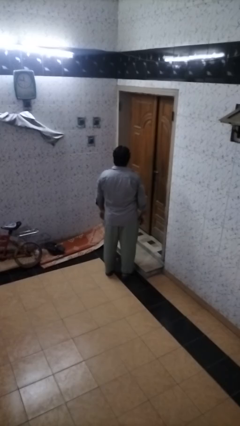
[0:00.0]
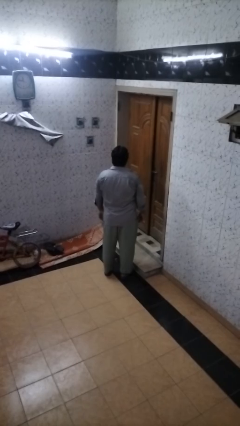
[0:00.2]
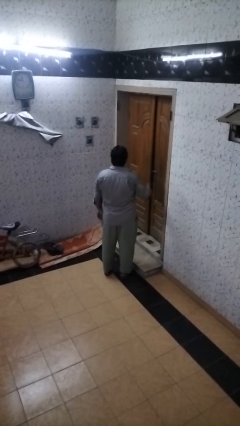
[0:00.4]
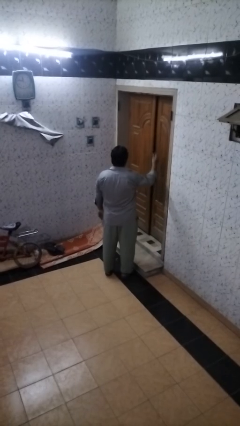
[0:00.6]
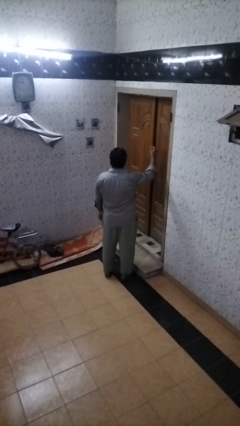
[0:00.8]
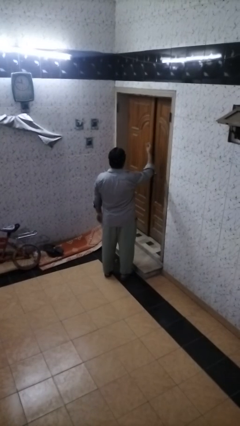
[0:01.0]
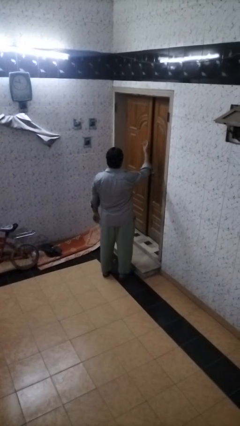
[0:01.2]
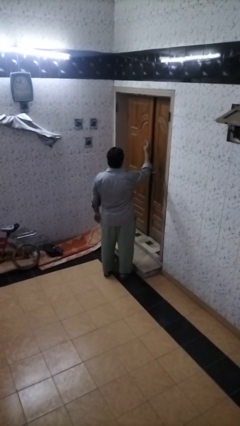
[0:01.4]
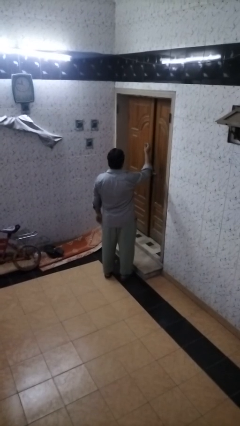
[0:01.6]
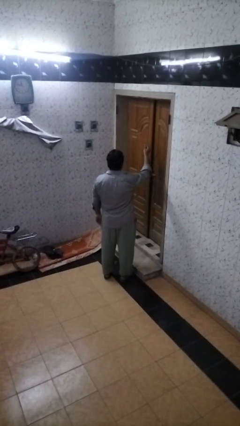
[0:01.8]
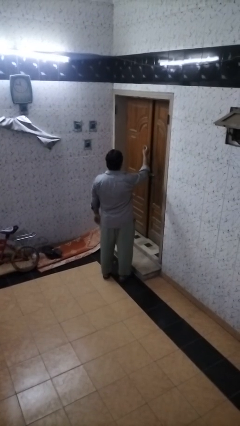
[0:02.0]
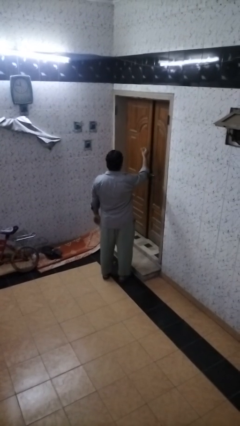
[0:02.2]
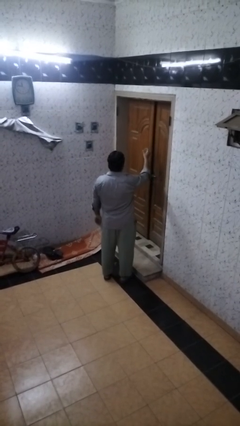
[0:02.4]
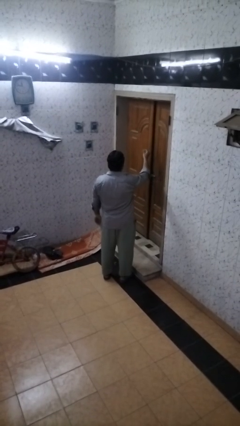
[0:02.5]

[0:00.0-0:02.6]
person snaps fingers

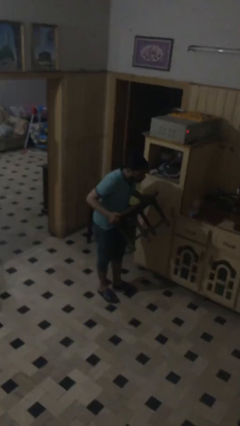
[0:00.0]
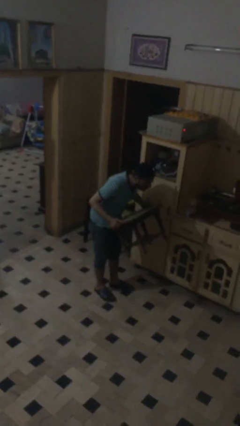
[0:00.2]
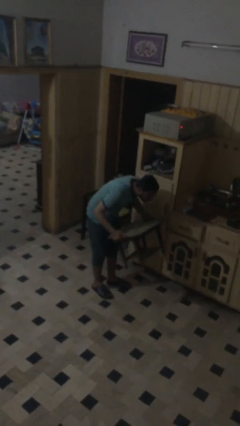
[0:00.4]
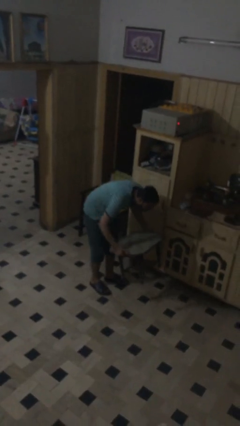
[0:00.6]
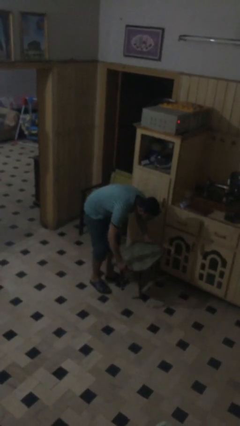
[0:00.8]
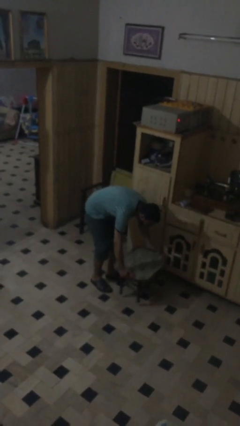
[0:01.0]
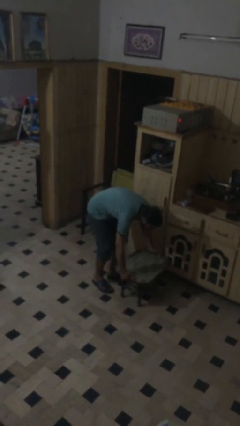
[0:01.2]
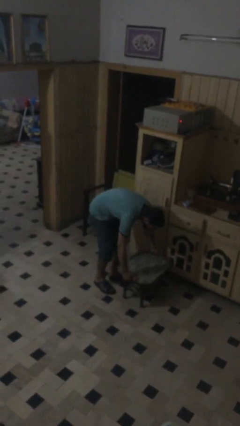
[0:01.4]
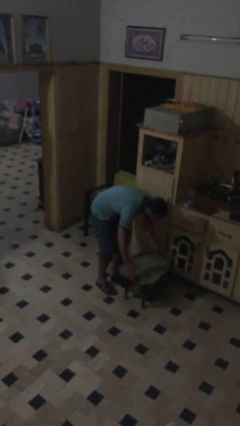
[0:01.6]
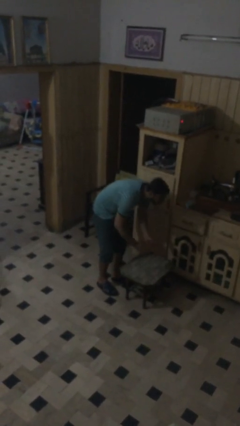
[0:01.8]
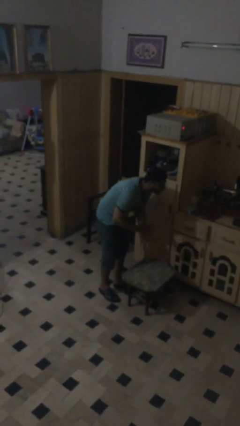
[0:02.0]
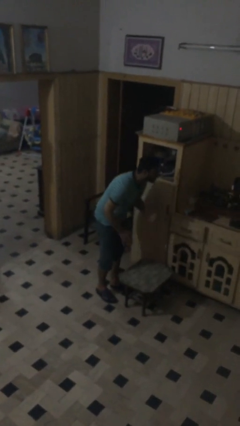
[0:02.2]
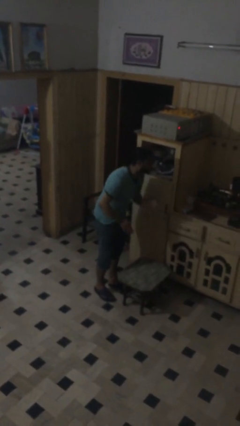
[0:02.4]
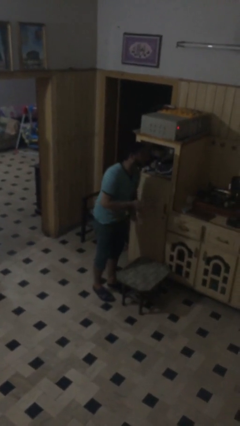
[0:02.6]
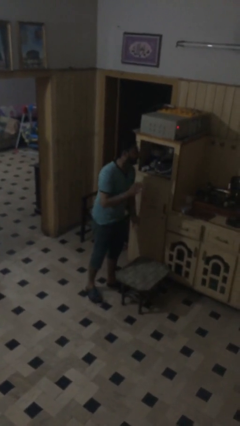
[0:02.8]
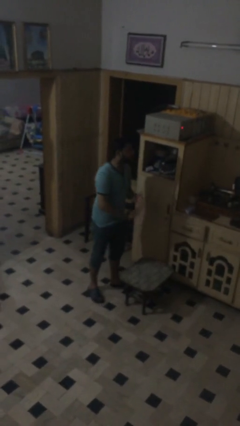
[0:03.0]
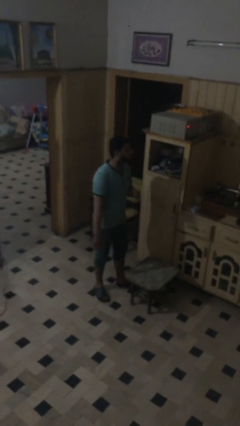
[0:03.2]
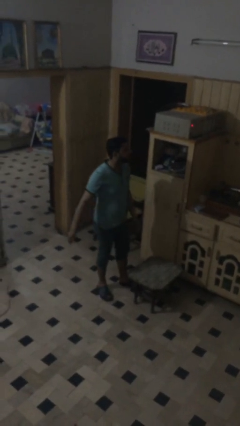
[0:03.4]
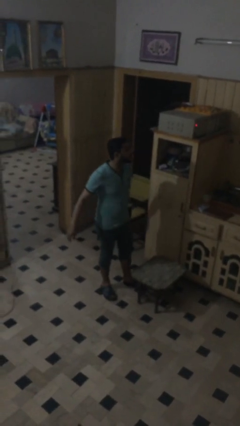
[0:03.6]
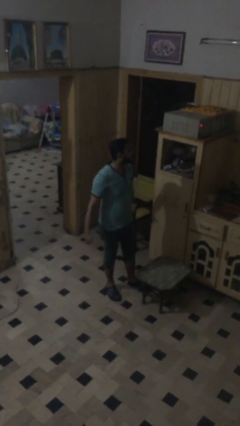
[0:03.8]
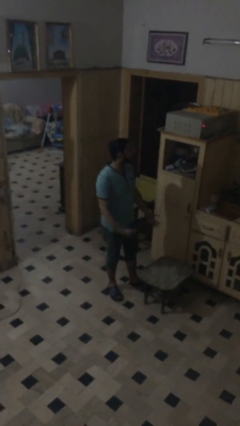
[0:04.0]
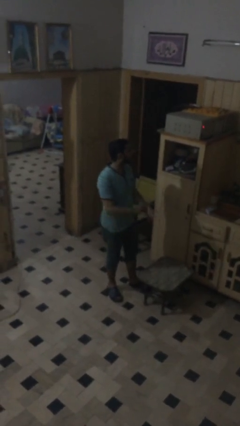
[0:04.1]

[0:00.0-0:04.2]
person puts down object on floor

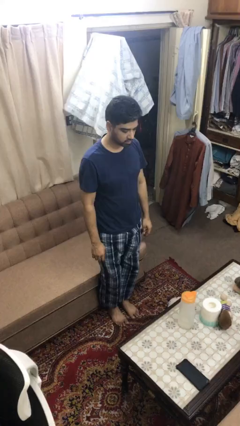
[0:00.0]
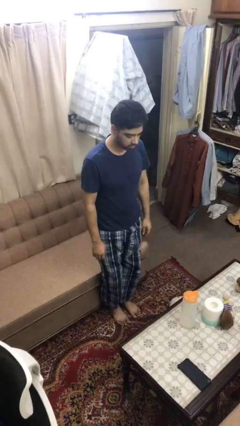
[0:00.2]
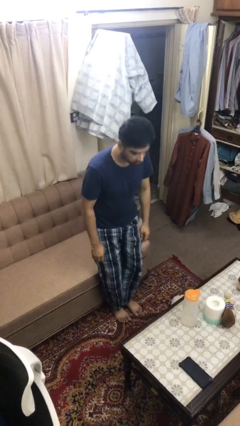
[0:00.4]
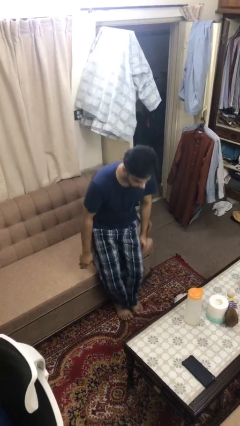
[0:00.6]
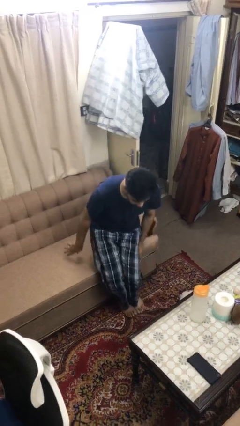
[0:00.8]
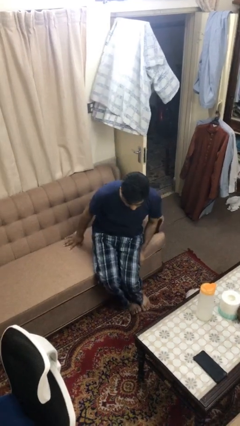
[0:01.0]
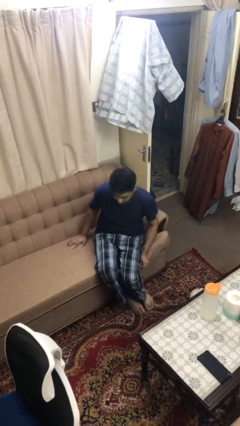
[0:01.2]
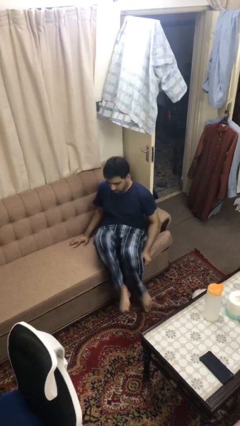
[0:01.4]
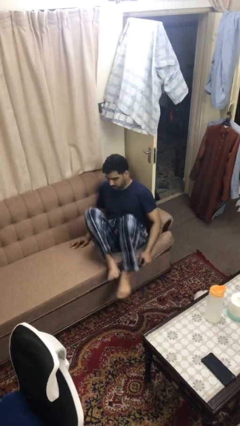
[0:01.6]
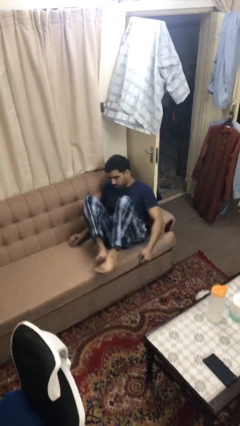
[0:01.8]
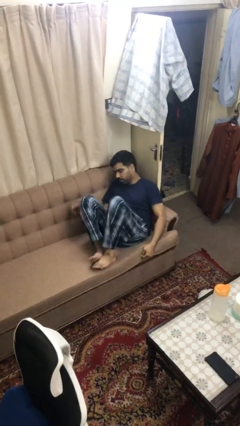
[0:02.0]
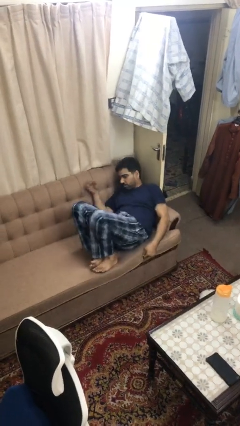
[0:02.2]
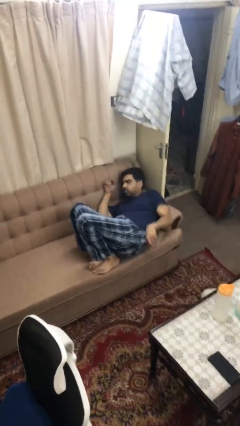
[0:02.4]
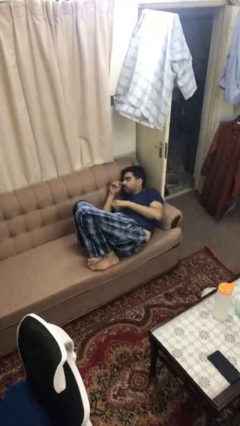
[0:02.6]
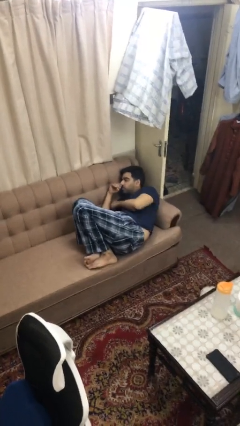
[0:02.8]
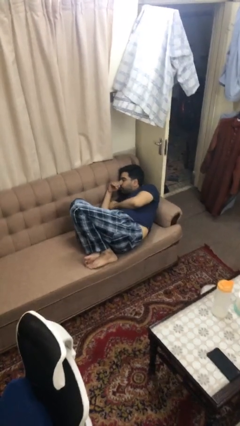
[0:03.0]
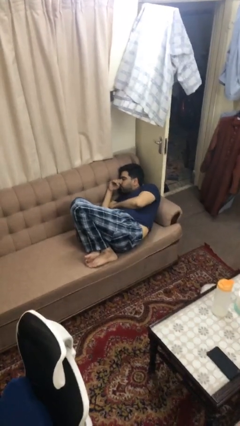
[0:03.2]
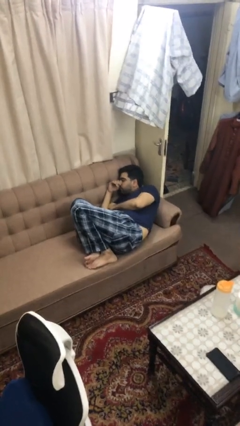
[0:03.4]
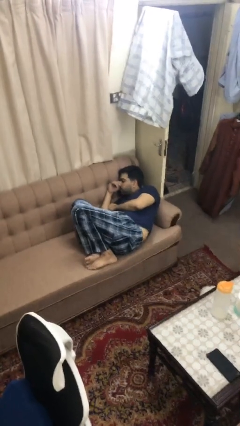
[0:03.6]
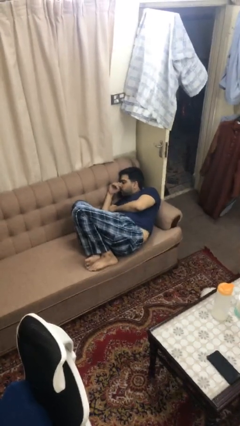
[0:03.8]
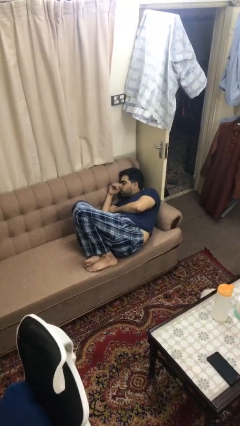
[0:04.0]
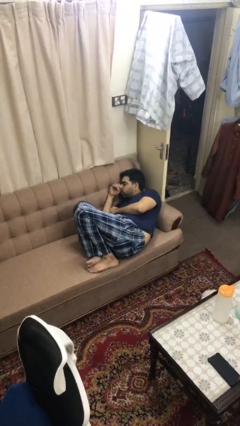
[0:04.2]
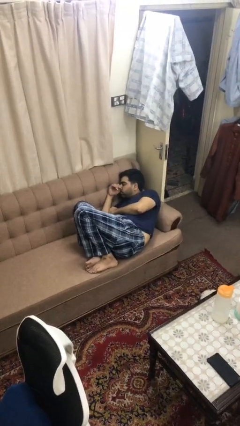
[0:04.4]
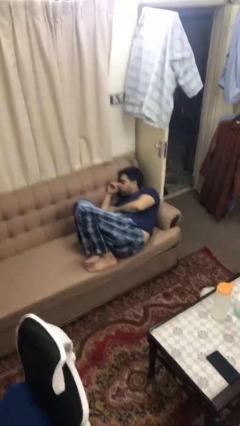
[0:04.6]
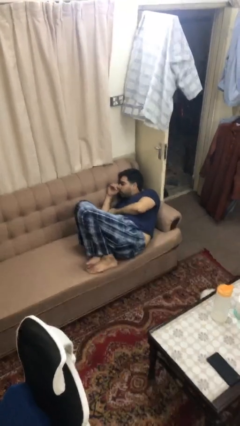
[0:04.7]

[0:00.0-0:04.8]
person lies down on couch

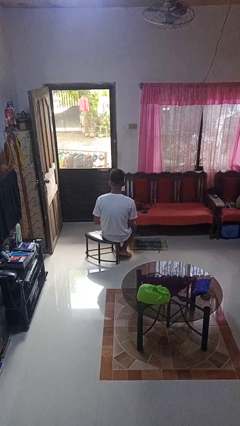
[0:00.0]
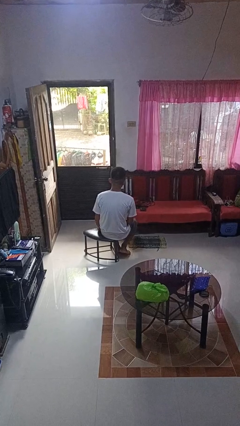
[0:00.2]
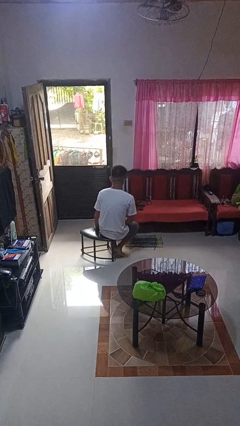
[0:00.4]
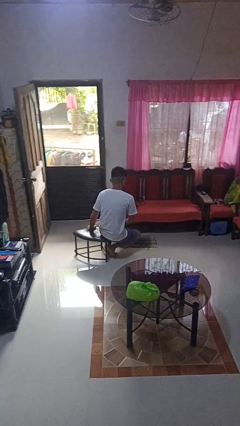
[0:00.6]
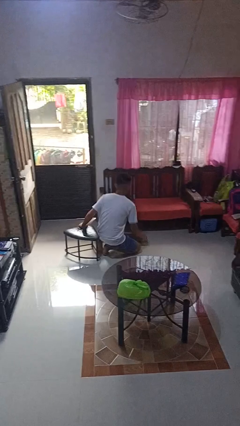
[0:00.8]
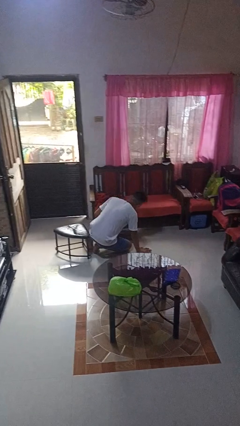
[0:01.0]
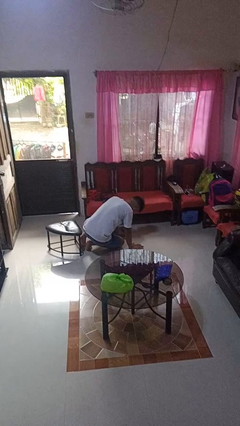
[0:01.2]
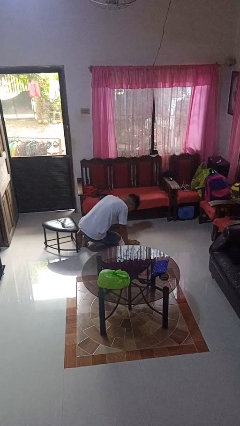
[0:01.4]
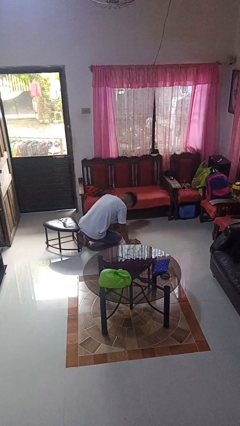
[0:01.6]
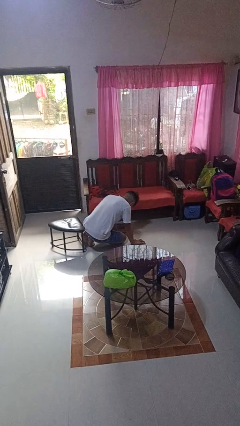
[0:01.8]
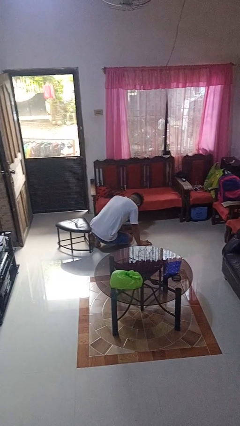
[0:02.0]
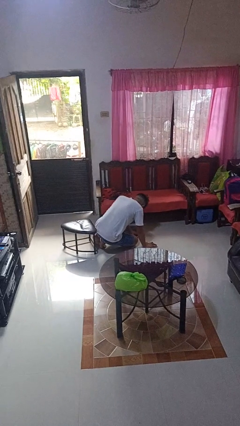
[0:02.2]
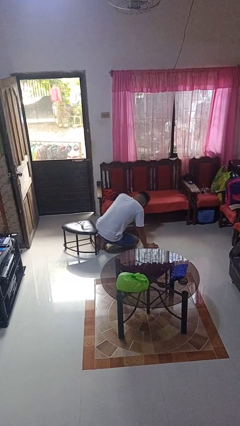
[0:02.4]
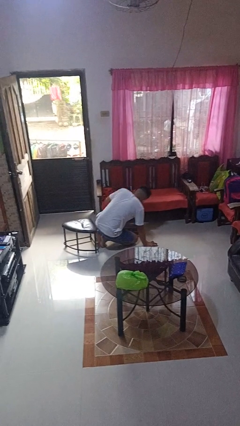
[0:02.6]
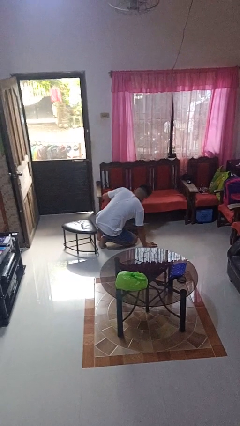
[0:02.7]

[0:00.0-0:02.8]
person falls from chair

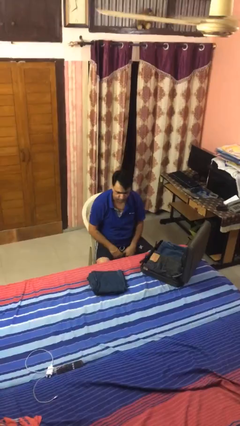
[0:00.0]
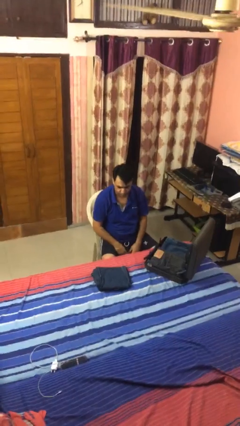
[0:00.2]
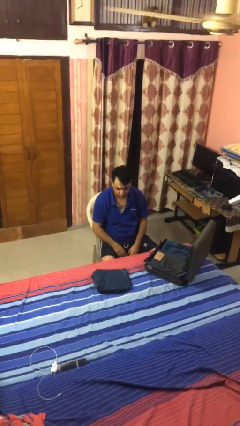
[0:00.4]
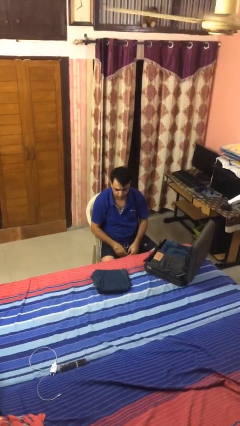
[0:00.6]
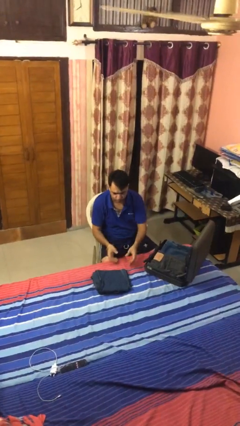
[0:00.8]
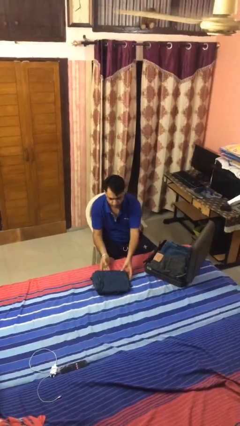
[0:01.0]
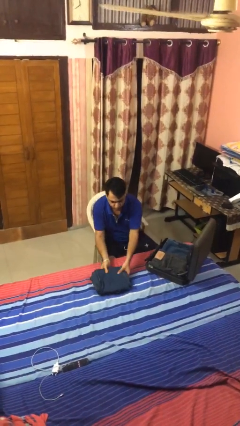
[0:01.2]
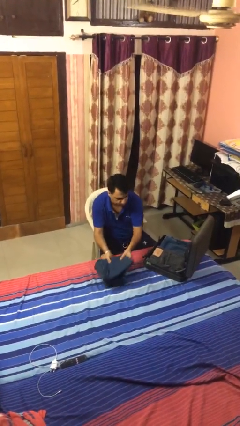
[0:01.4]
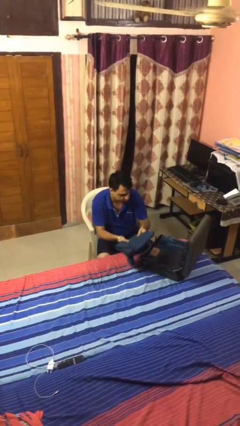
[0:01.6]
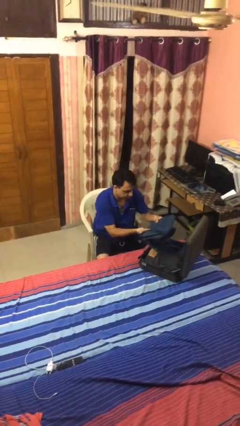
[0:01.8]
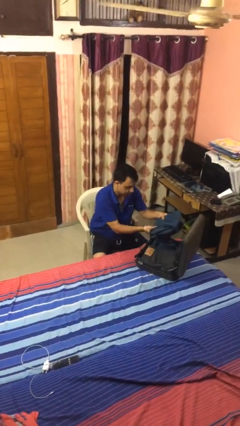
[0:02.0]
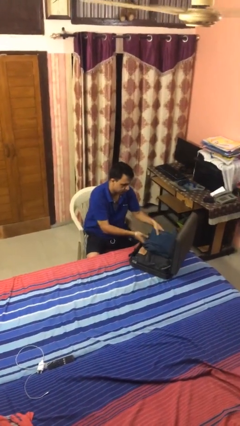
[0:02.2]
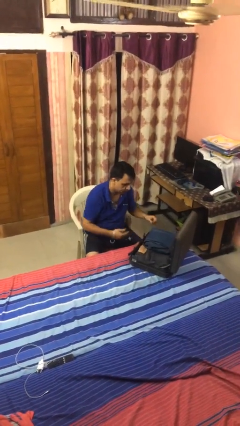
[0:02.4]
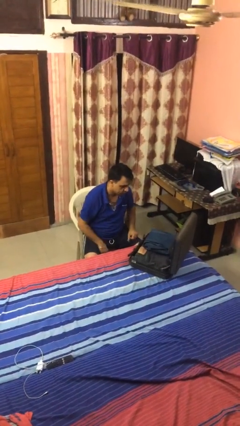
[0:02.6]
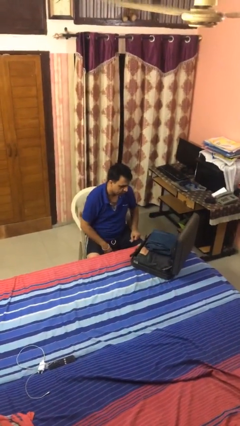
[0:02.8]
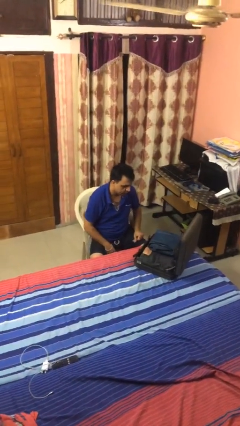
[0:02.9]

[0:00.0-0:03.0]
person loads clothes into suitcase

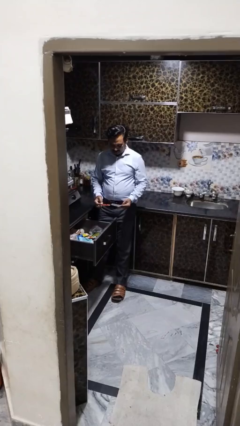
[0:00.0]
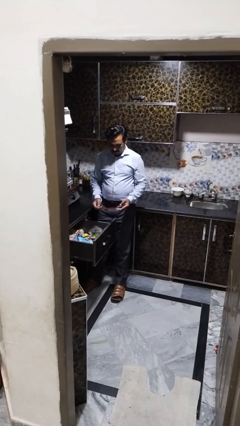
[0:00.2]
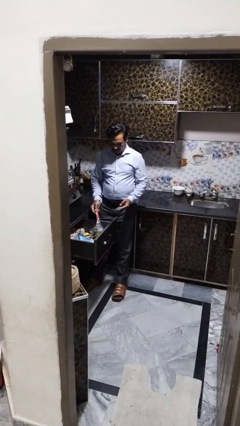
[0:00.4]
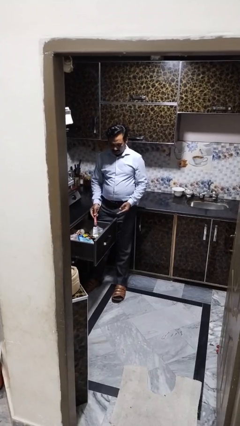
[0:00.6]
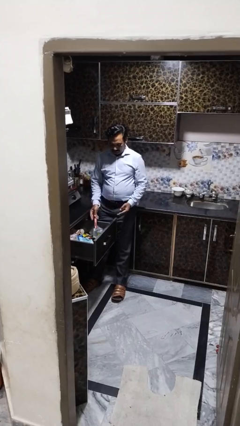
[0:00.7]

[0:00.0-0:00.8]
person puts object into kitchen drawer
